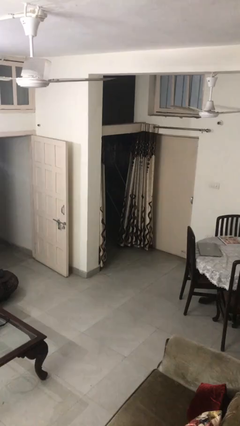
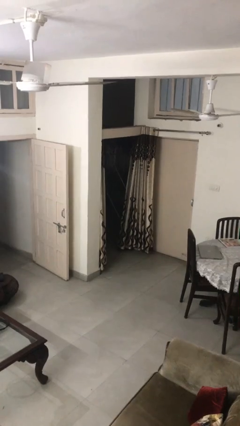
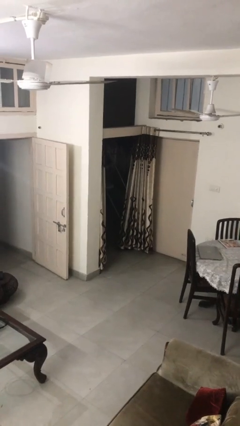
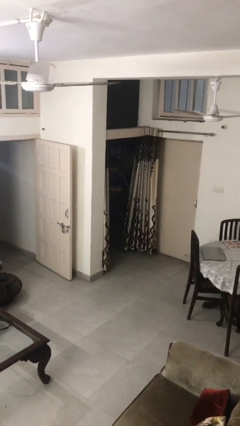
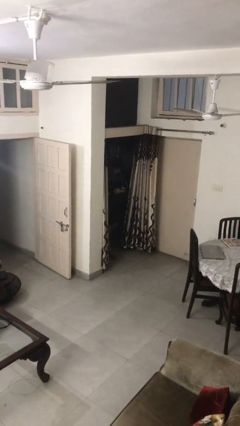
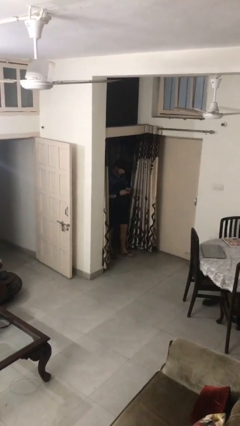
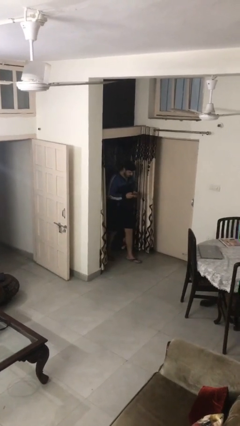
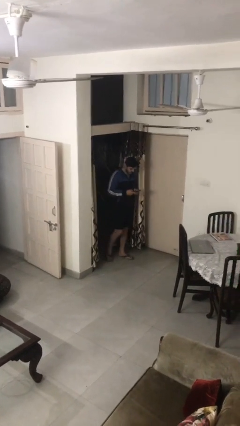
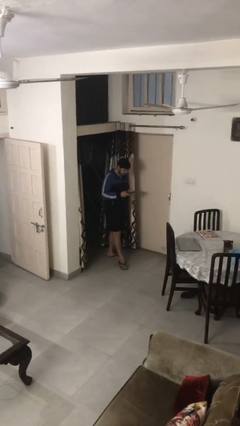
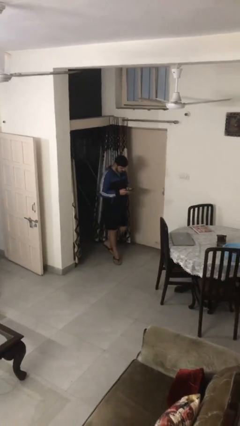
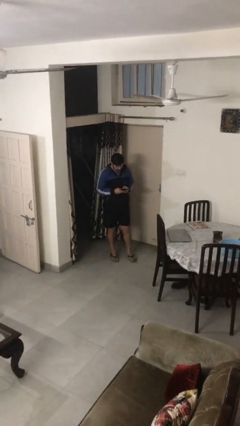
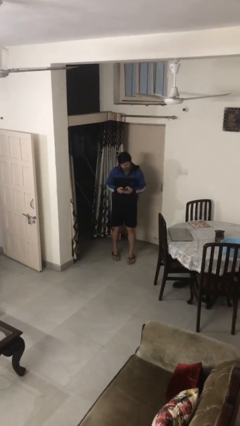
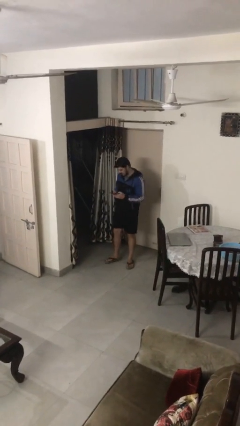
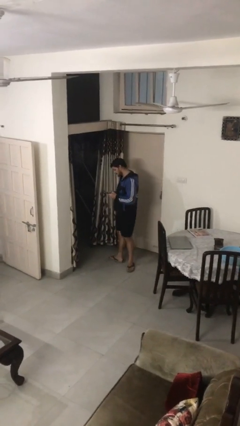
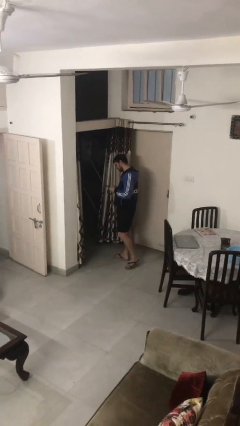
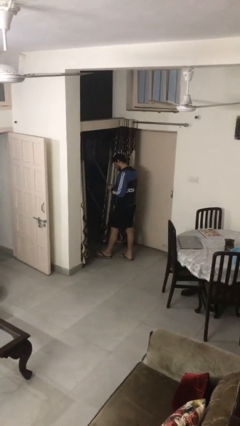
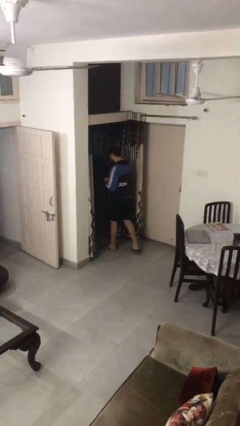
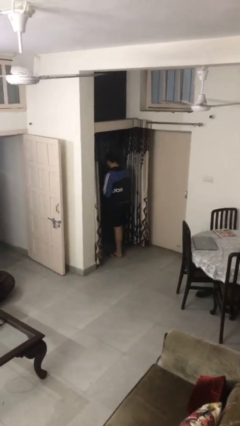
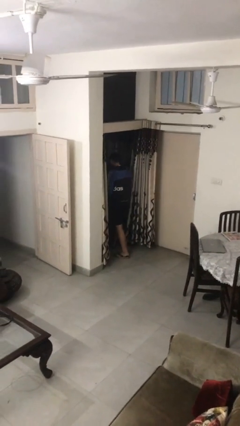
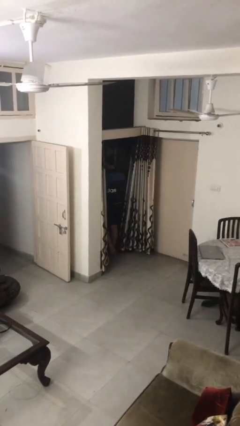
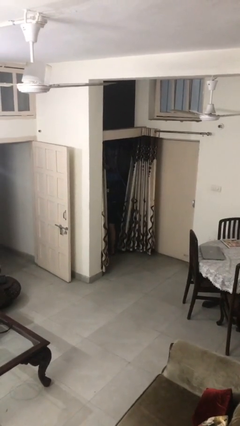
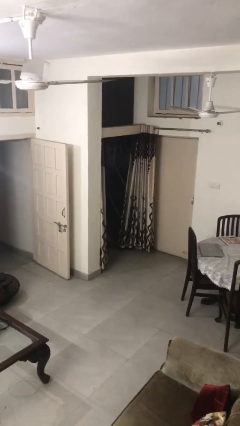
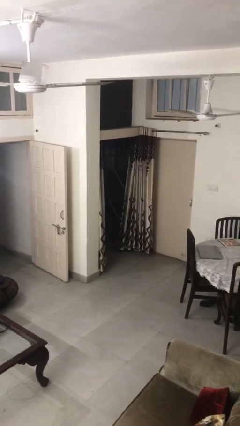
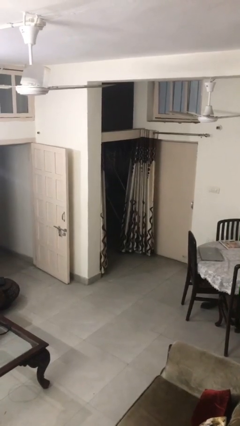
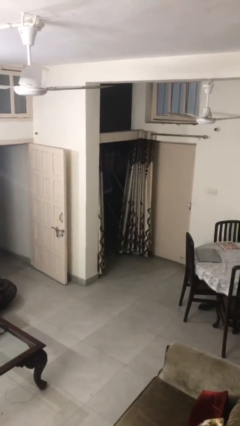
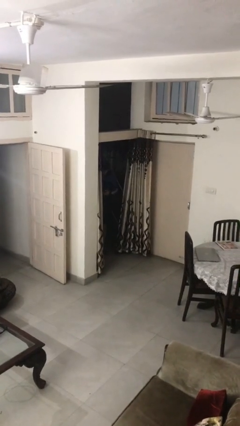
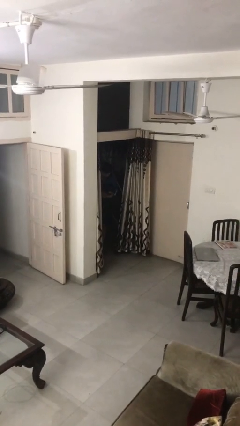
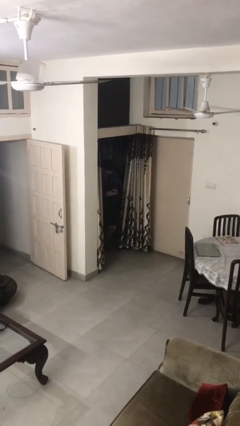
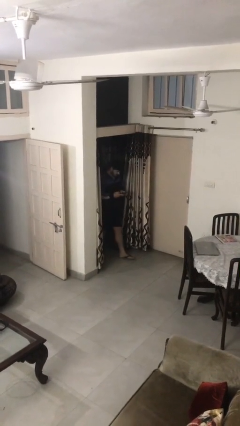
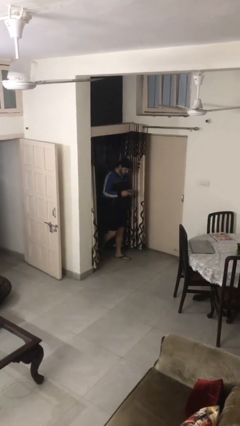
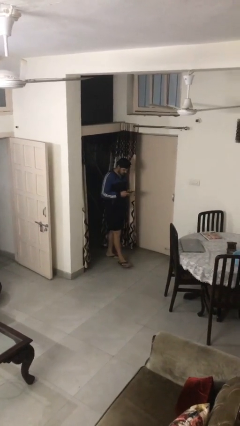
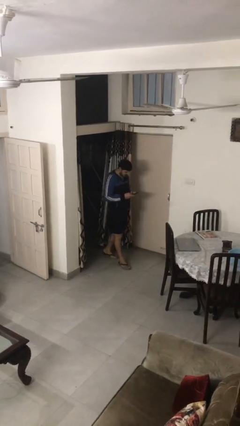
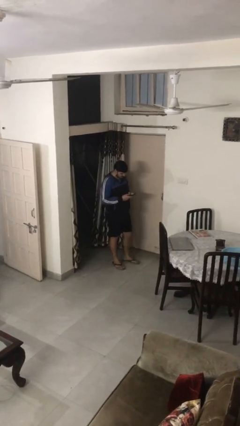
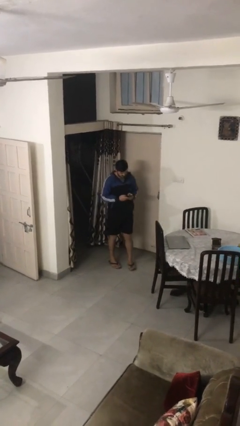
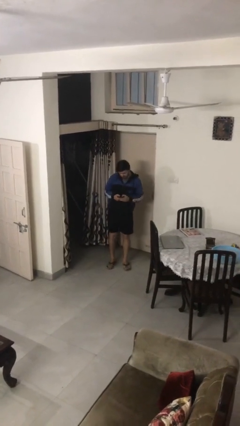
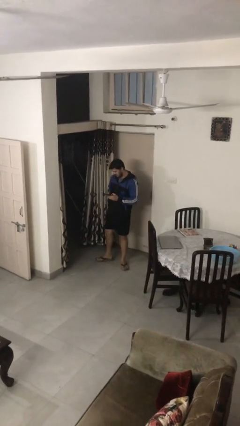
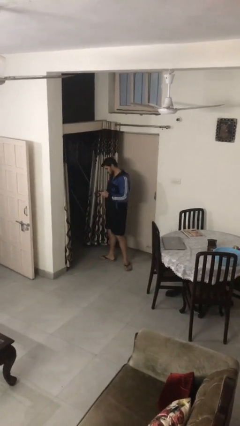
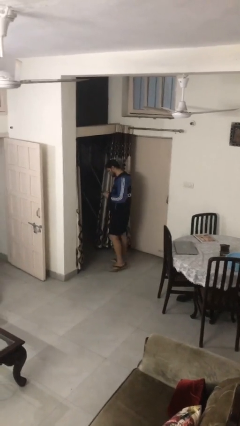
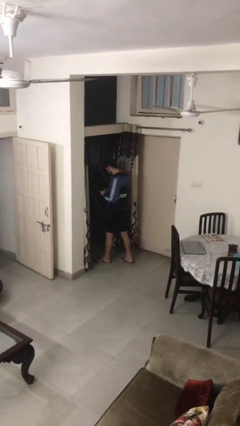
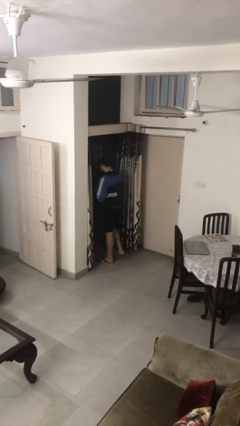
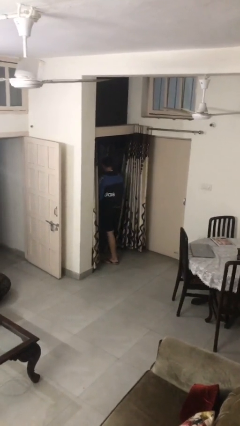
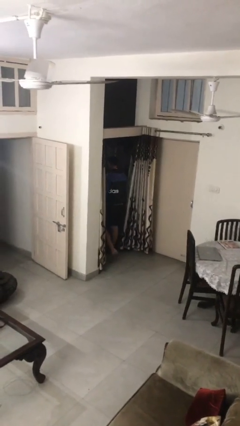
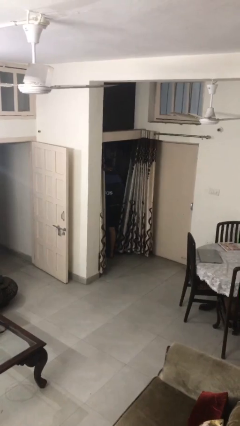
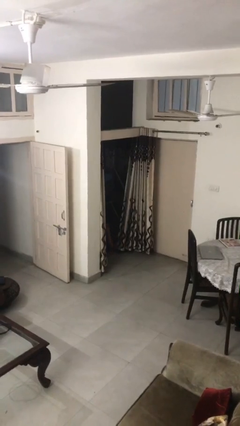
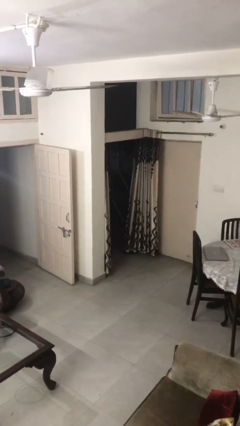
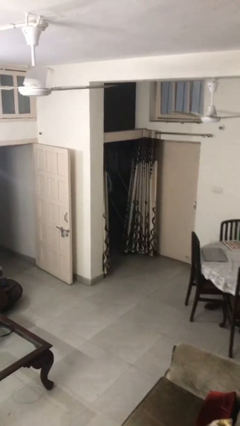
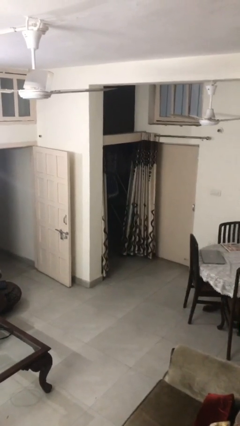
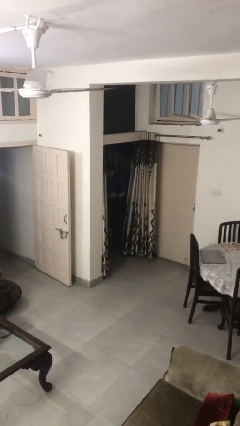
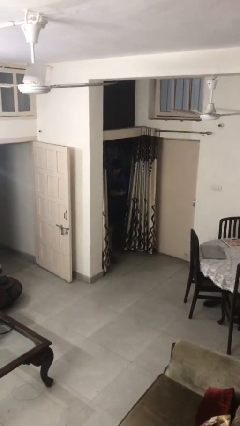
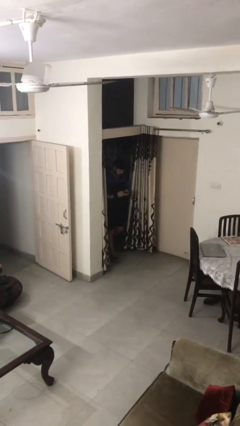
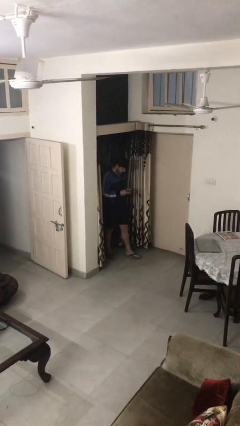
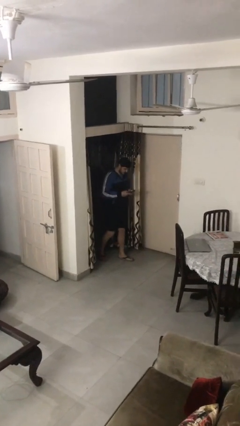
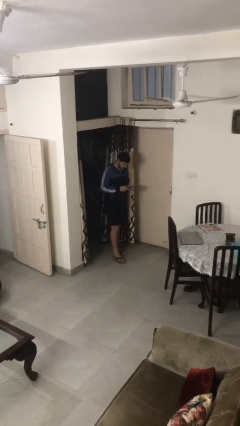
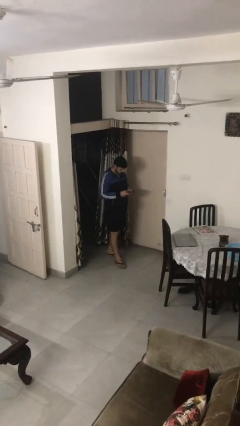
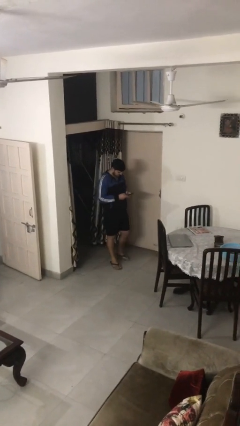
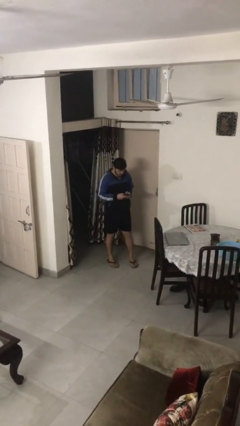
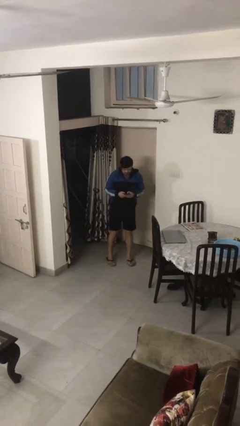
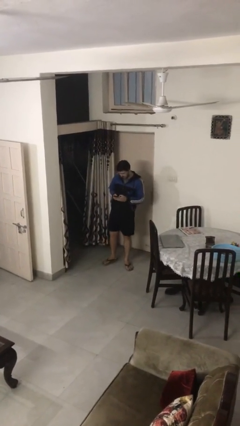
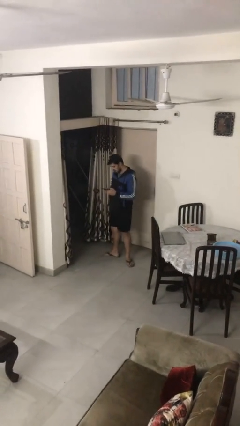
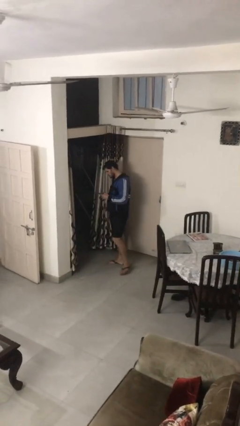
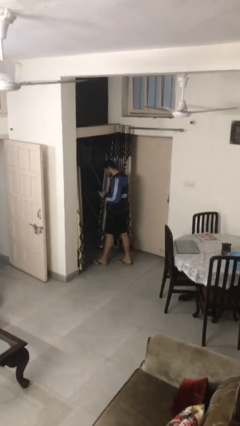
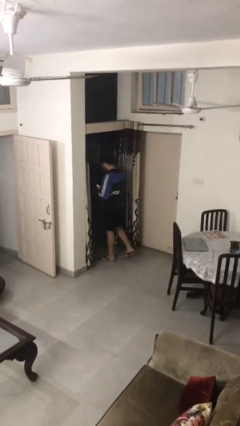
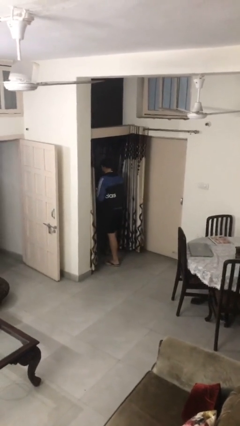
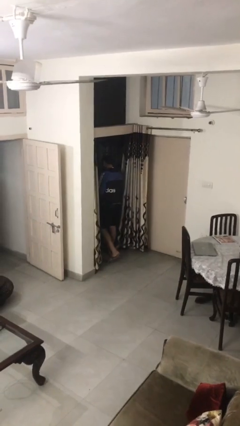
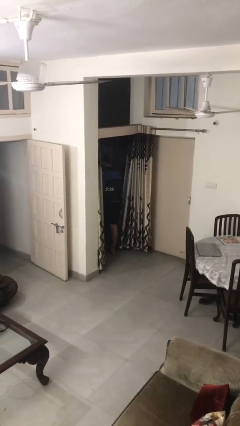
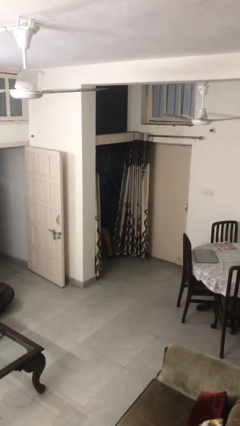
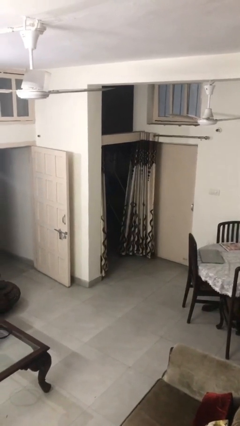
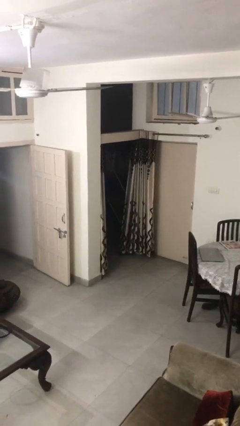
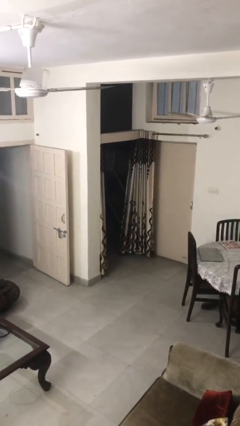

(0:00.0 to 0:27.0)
person texts on phone

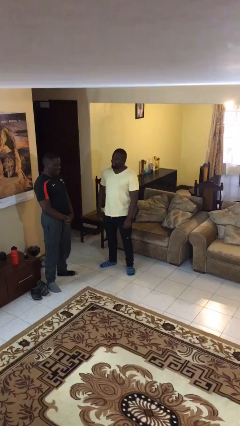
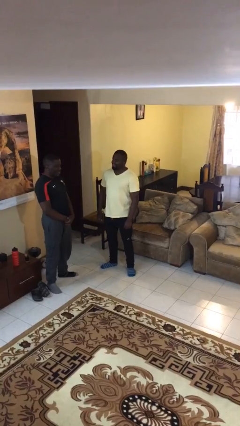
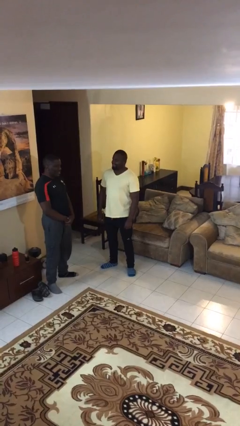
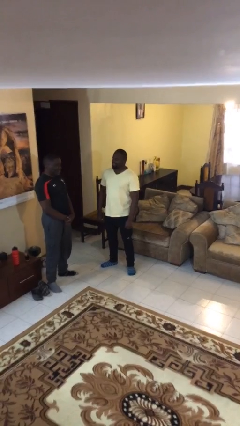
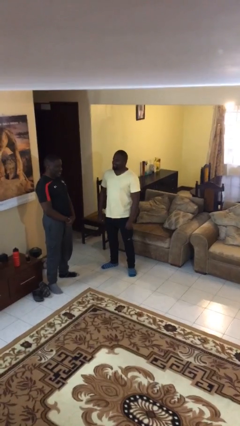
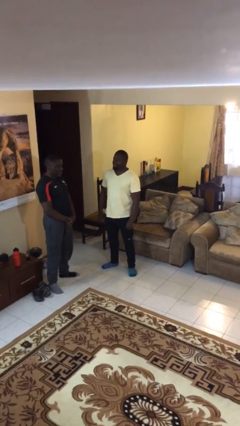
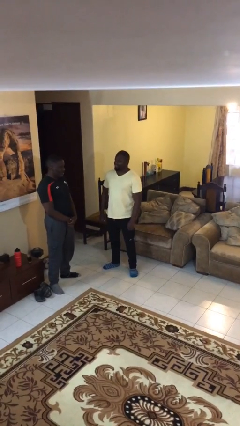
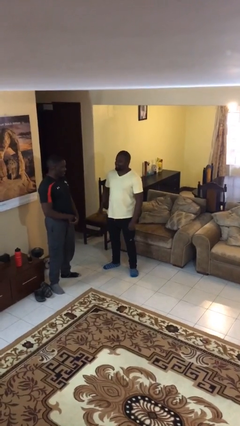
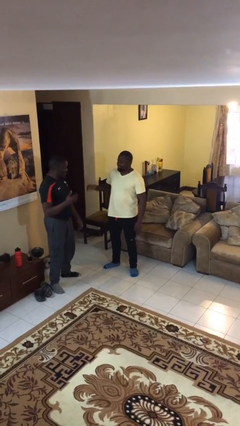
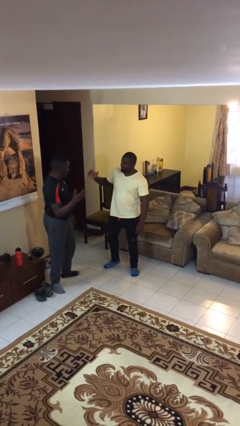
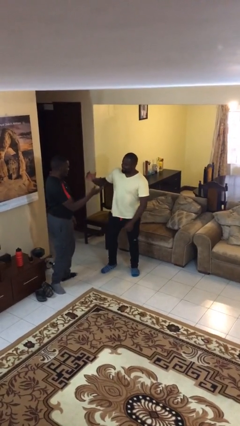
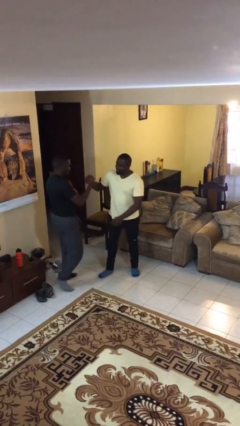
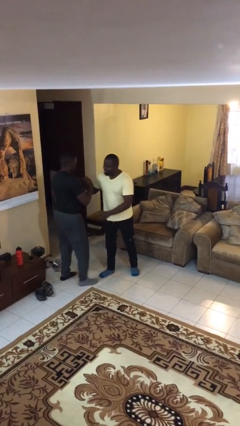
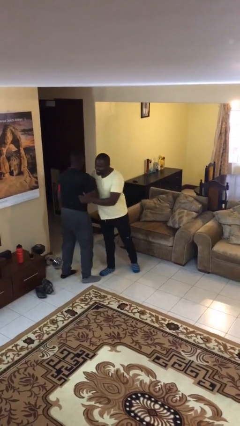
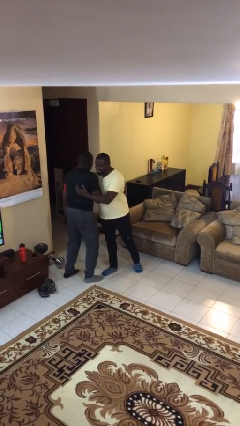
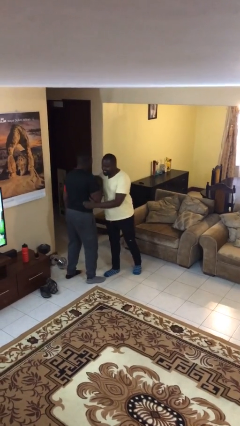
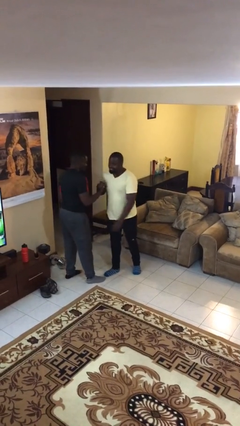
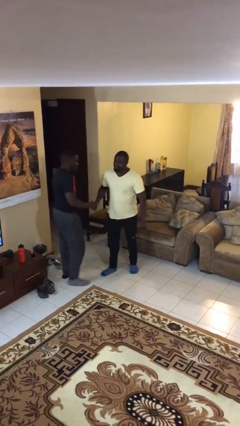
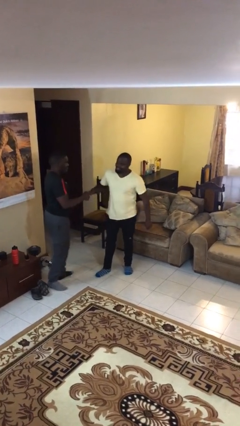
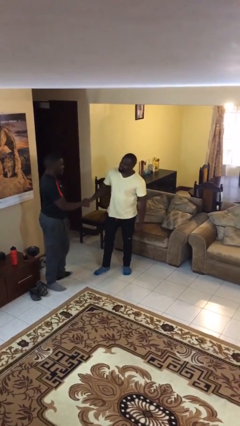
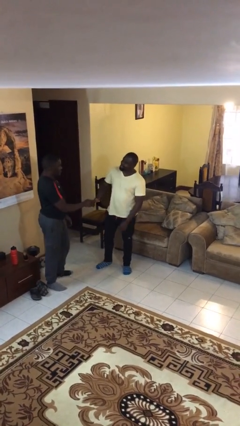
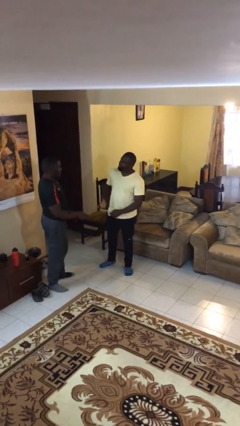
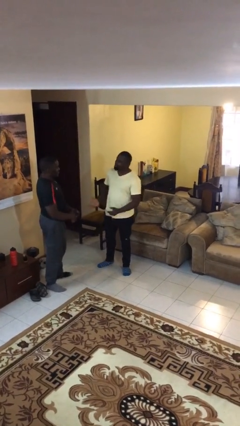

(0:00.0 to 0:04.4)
person embraces person

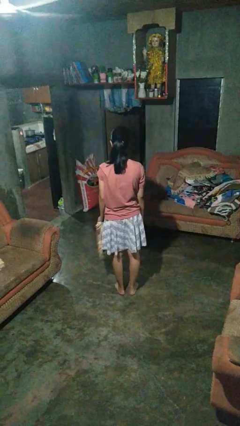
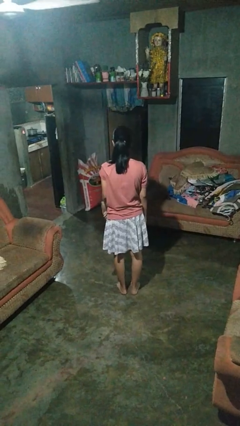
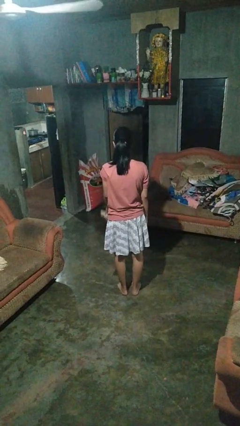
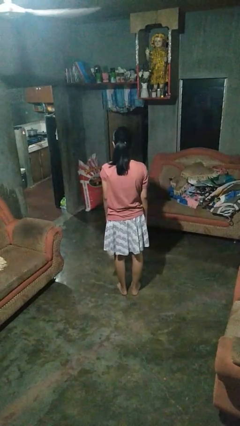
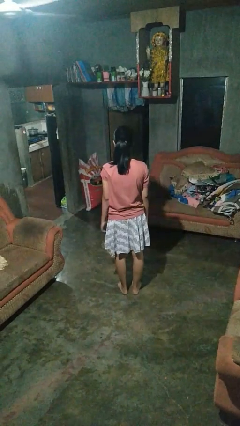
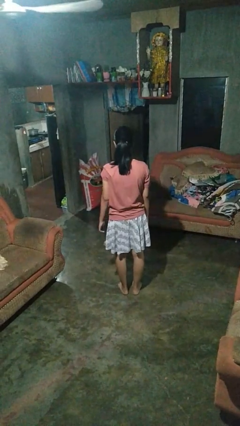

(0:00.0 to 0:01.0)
person throws object to ground
